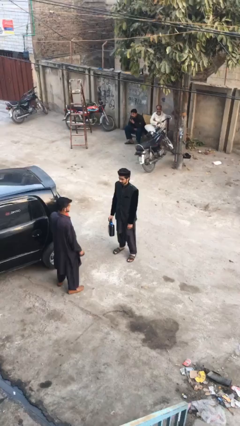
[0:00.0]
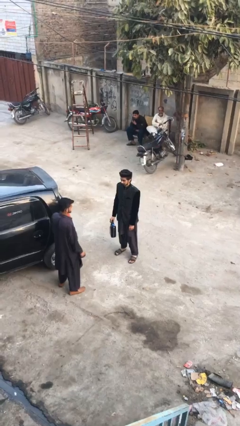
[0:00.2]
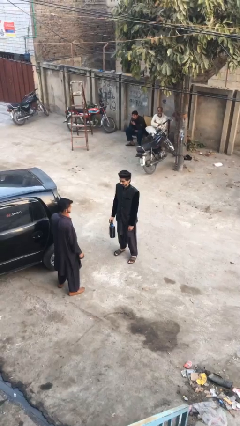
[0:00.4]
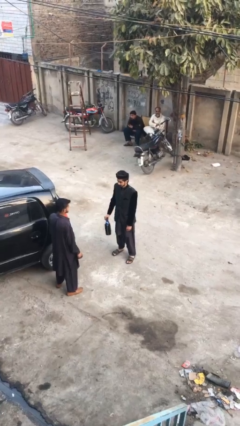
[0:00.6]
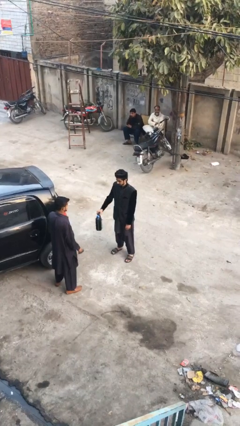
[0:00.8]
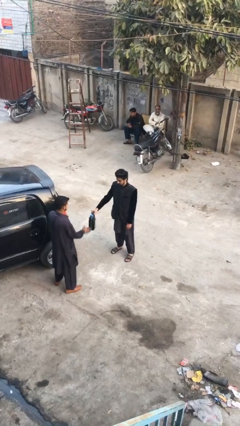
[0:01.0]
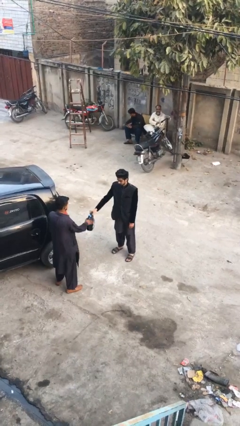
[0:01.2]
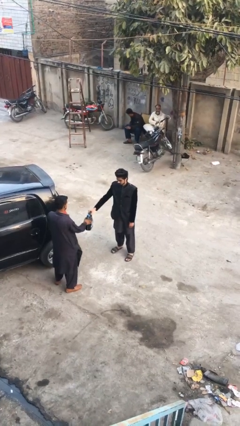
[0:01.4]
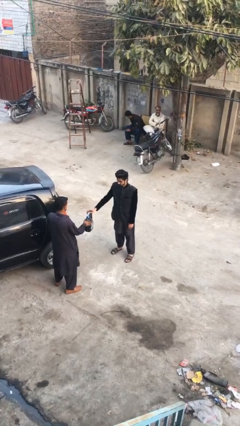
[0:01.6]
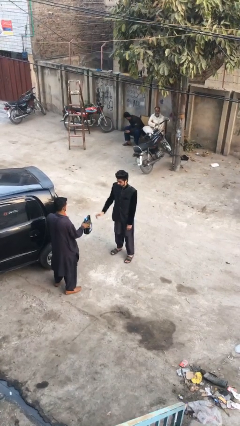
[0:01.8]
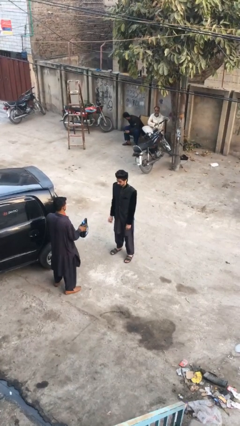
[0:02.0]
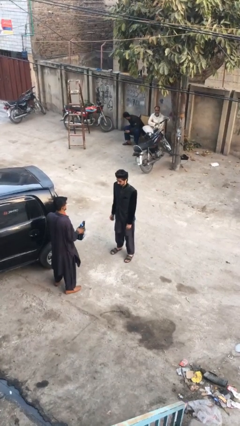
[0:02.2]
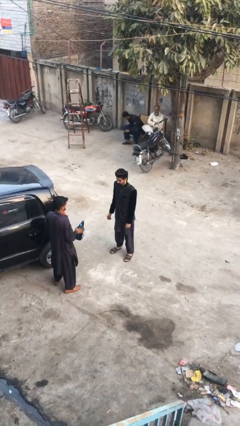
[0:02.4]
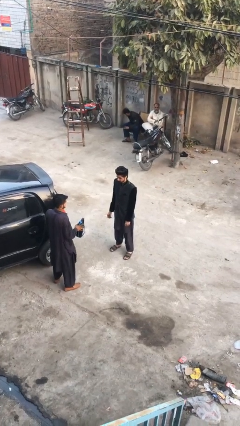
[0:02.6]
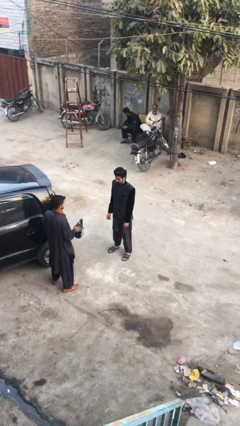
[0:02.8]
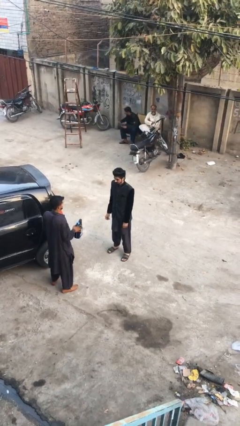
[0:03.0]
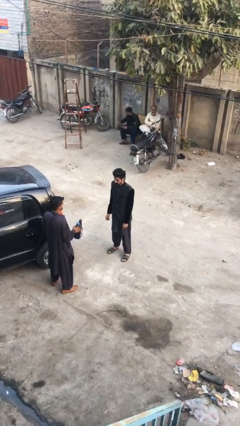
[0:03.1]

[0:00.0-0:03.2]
person transfers object to person

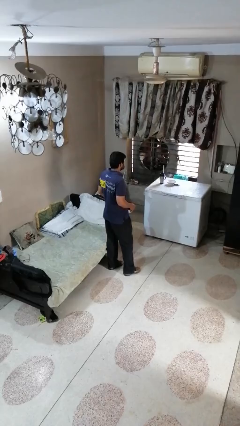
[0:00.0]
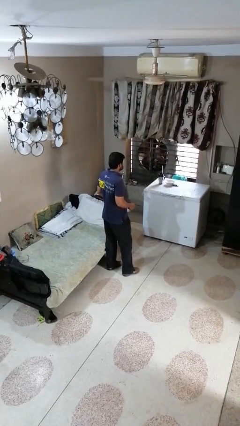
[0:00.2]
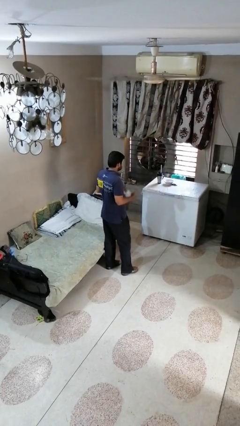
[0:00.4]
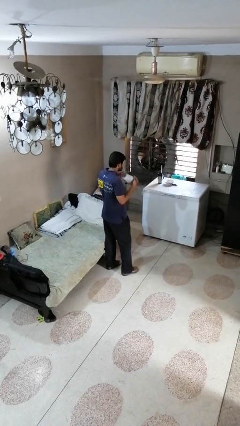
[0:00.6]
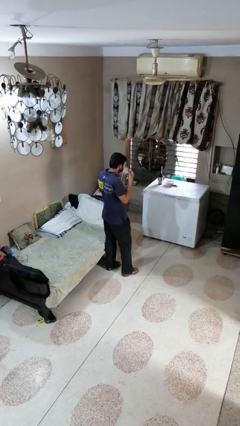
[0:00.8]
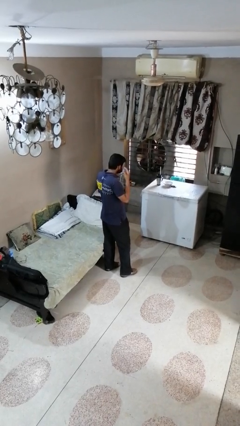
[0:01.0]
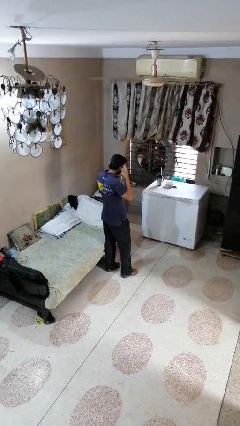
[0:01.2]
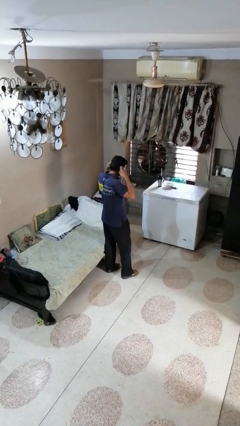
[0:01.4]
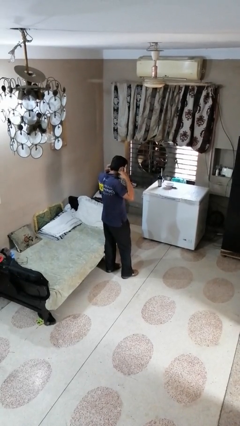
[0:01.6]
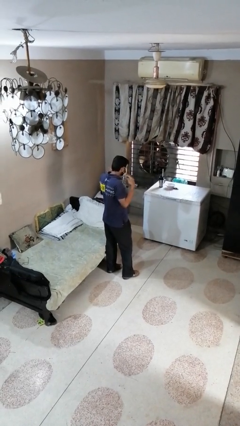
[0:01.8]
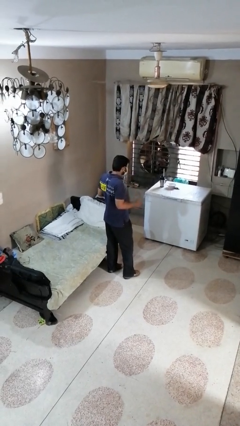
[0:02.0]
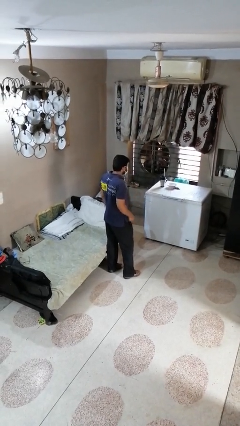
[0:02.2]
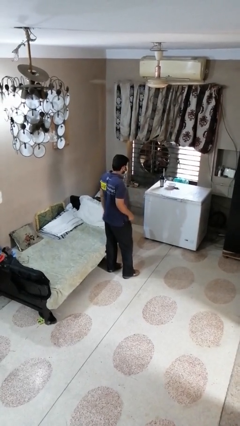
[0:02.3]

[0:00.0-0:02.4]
person puts on facemask

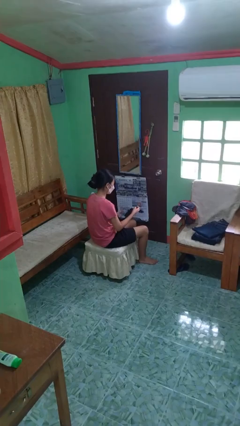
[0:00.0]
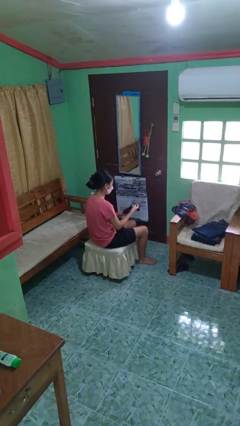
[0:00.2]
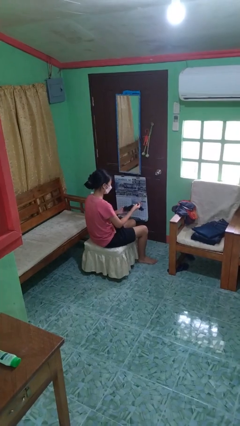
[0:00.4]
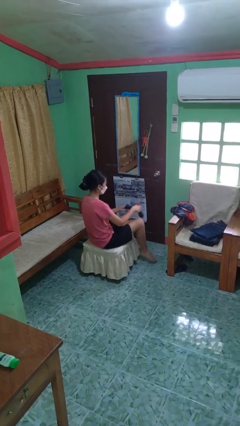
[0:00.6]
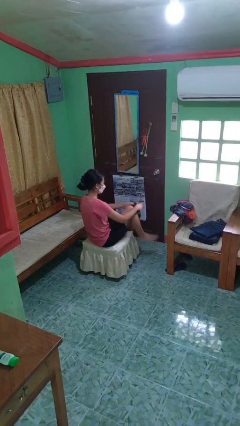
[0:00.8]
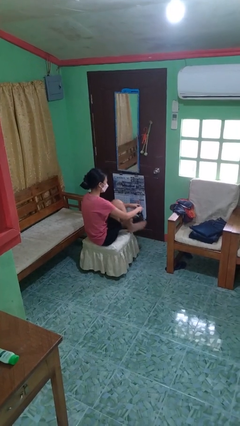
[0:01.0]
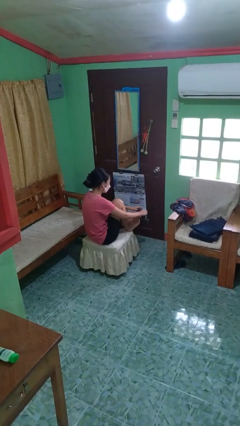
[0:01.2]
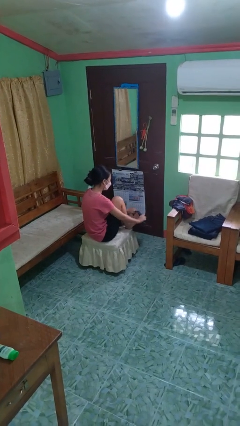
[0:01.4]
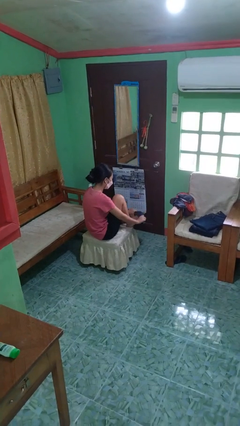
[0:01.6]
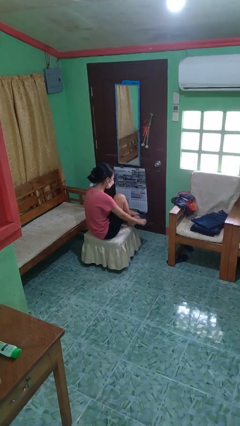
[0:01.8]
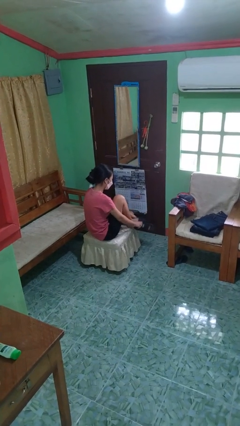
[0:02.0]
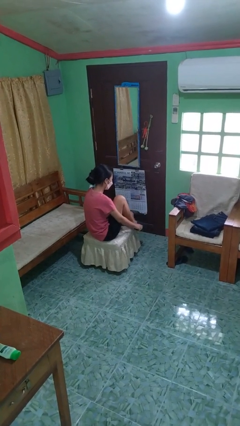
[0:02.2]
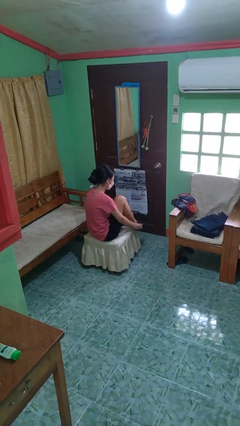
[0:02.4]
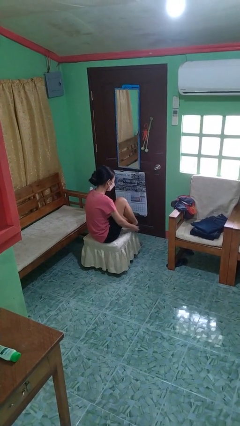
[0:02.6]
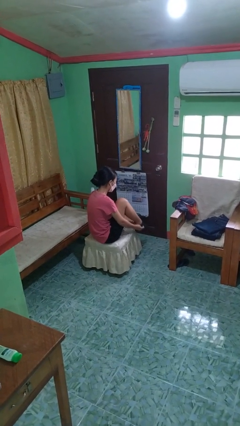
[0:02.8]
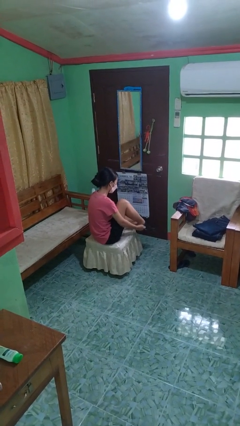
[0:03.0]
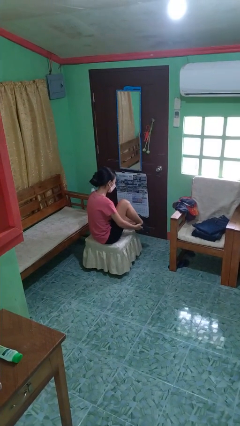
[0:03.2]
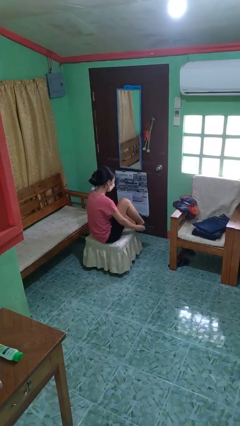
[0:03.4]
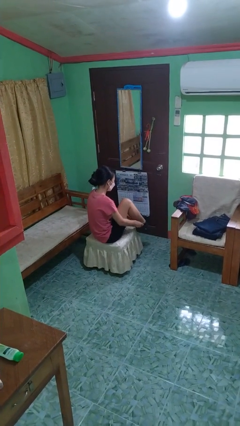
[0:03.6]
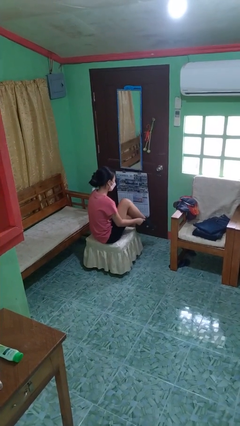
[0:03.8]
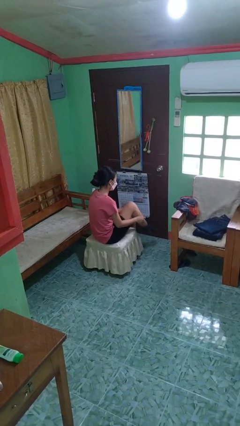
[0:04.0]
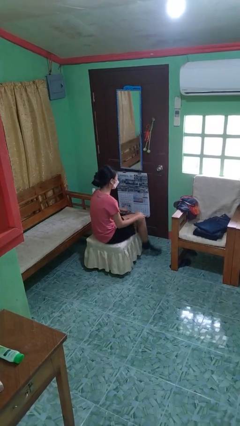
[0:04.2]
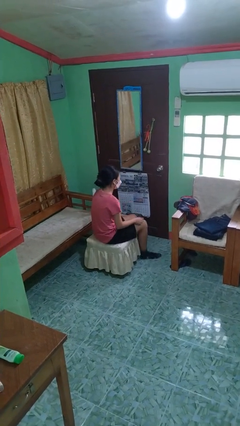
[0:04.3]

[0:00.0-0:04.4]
person puts on socks

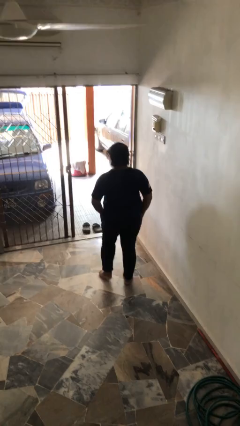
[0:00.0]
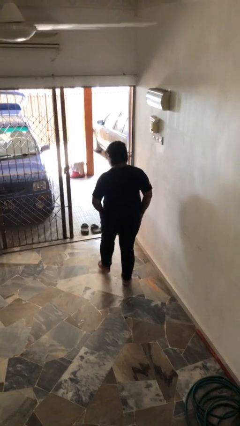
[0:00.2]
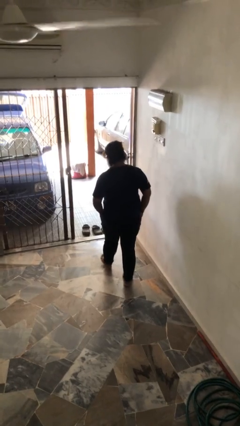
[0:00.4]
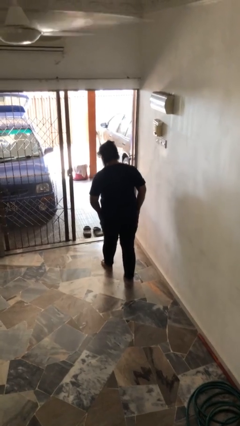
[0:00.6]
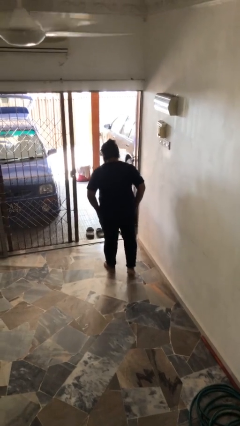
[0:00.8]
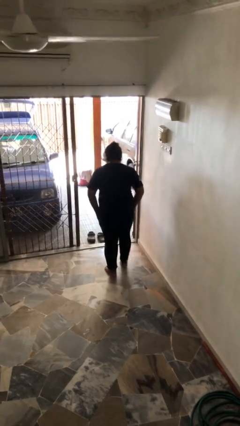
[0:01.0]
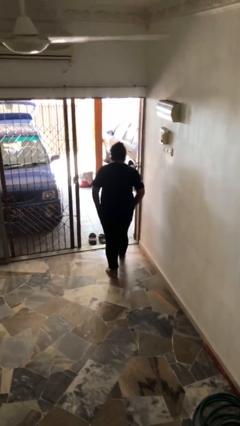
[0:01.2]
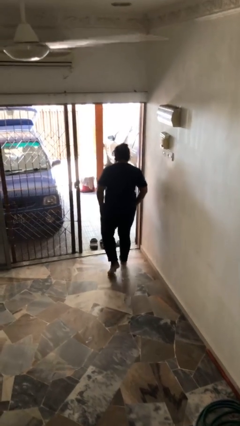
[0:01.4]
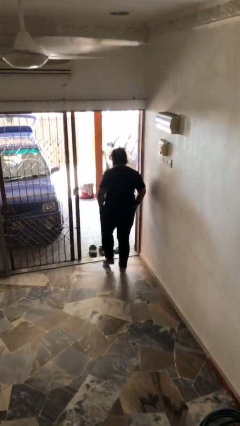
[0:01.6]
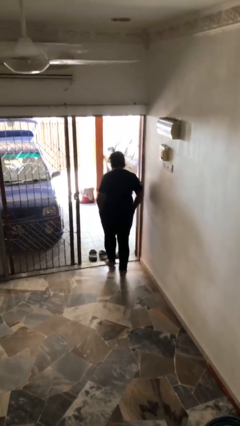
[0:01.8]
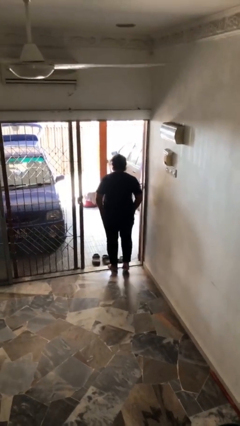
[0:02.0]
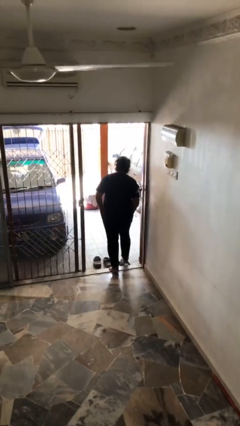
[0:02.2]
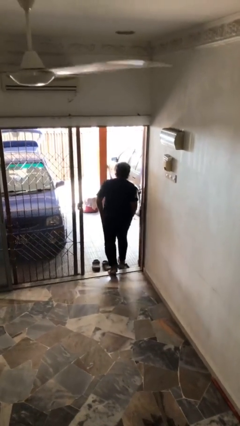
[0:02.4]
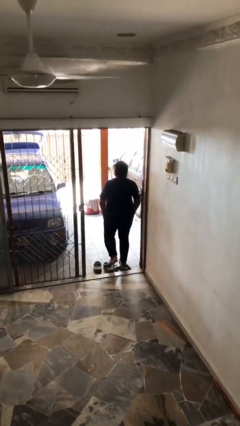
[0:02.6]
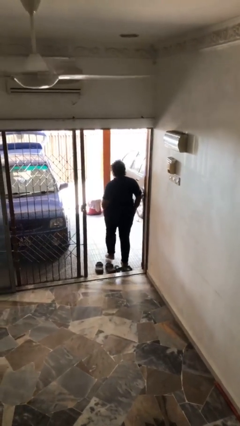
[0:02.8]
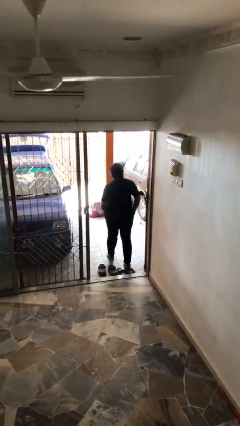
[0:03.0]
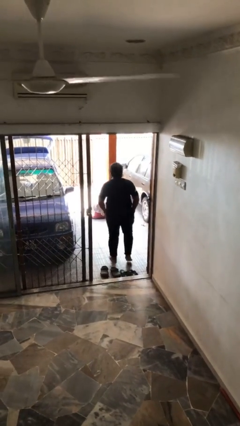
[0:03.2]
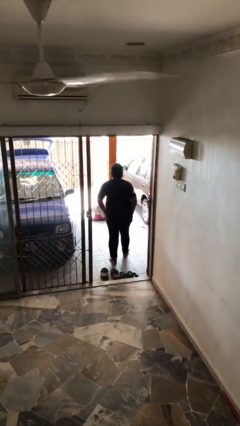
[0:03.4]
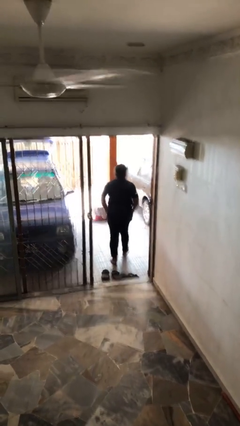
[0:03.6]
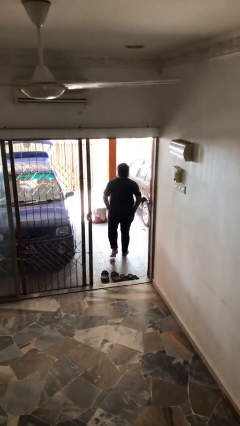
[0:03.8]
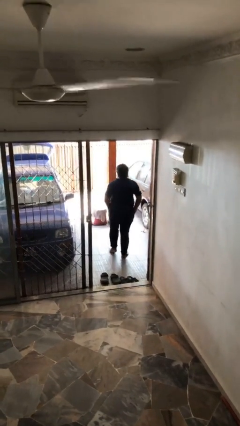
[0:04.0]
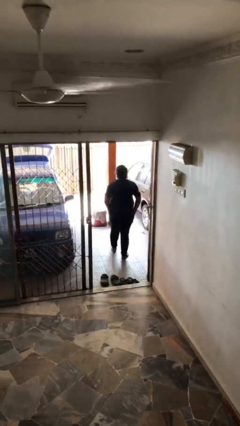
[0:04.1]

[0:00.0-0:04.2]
person exits scene through structure

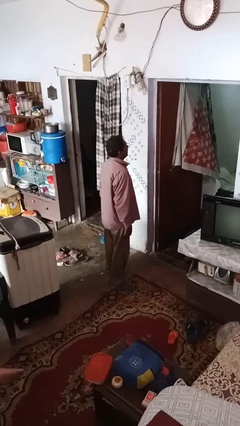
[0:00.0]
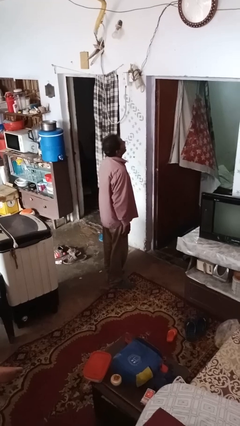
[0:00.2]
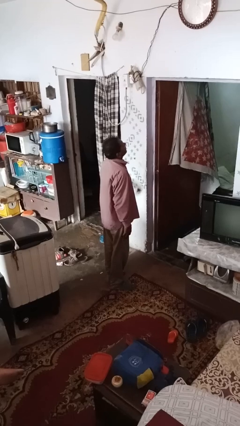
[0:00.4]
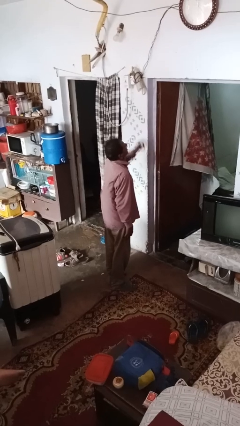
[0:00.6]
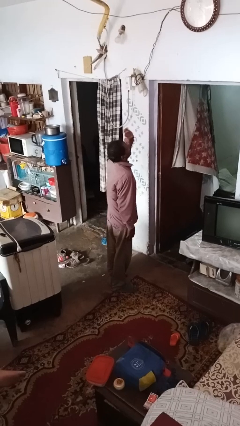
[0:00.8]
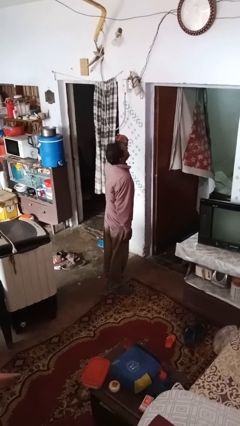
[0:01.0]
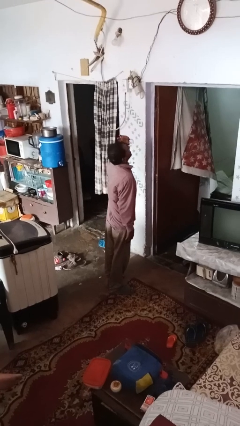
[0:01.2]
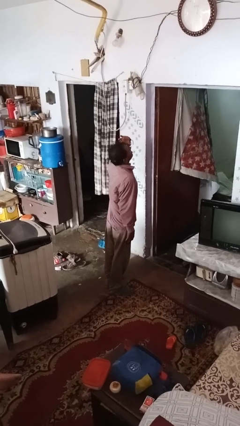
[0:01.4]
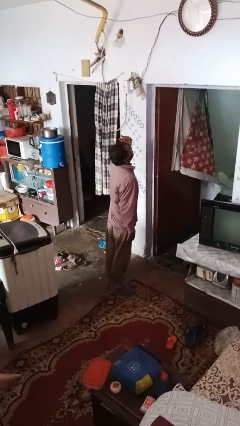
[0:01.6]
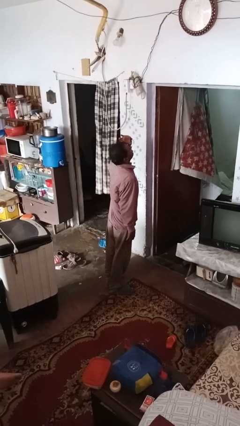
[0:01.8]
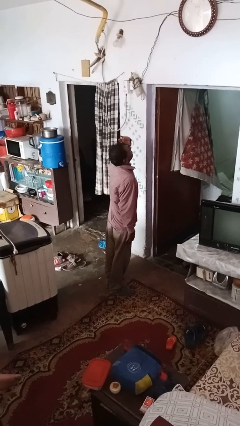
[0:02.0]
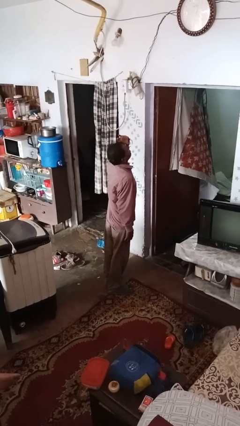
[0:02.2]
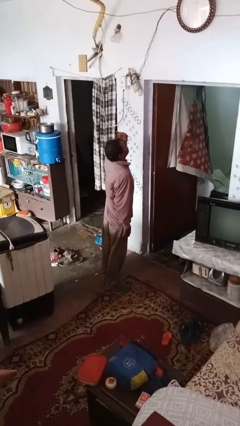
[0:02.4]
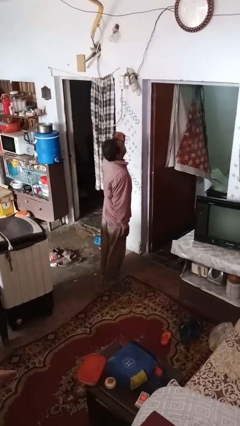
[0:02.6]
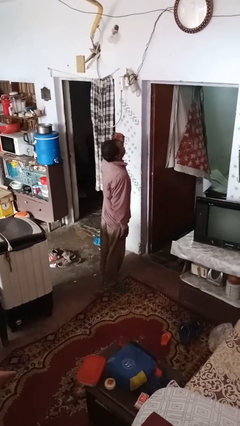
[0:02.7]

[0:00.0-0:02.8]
person gestures watch closely

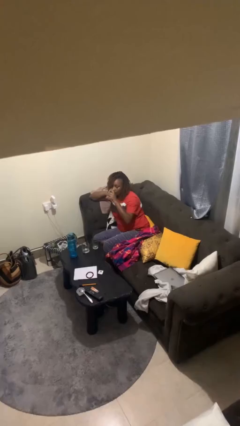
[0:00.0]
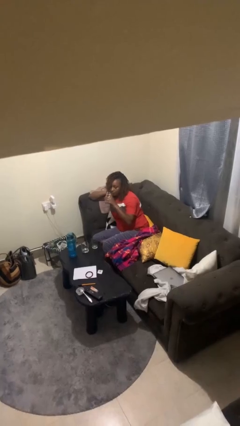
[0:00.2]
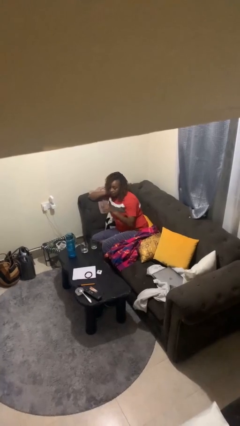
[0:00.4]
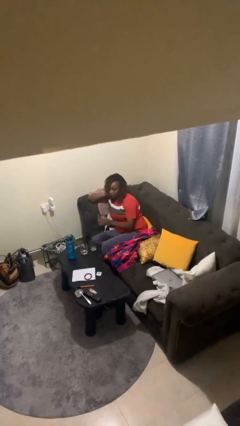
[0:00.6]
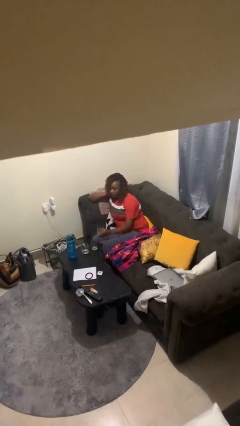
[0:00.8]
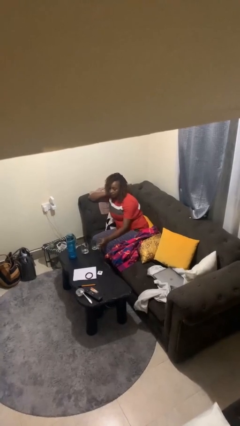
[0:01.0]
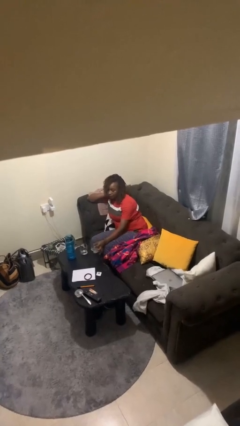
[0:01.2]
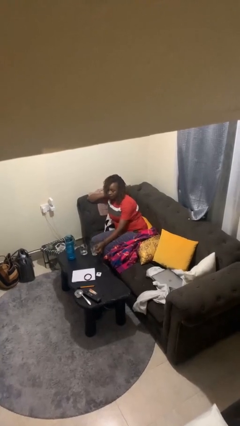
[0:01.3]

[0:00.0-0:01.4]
person puts down object on table
